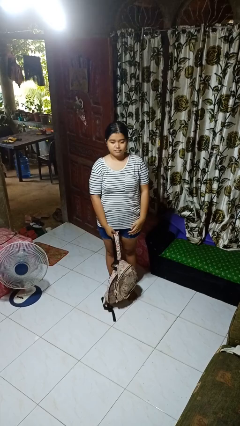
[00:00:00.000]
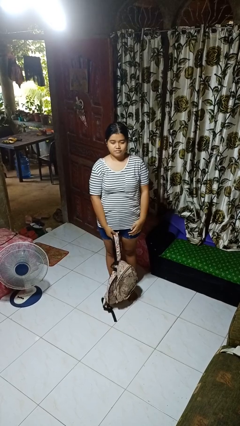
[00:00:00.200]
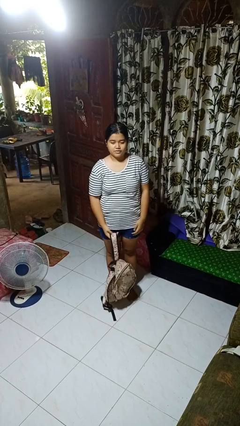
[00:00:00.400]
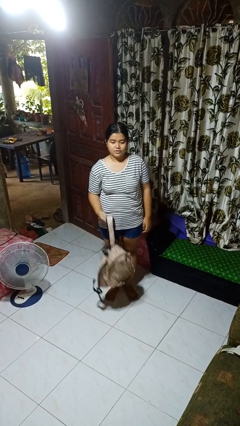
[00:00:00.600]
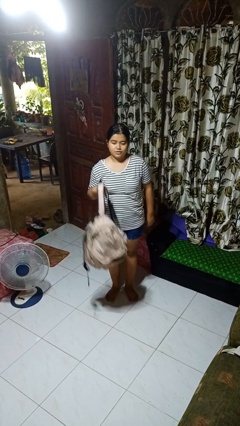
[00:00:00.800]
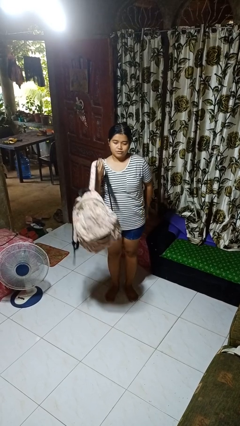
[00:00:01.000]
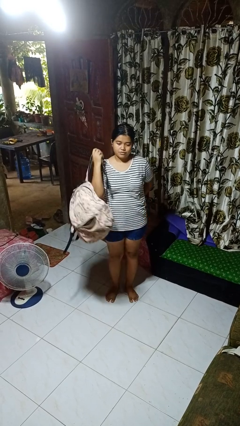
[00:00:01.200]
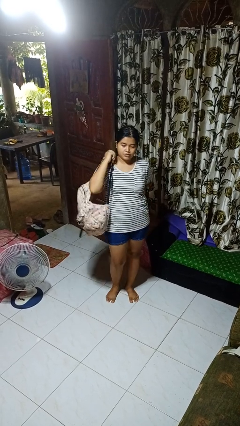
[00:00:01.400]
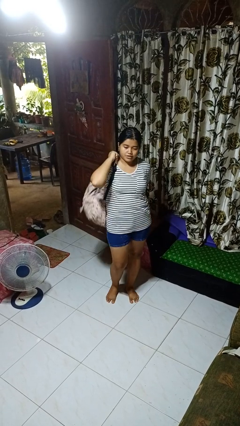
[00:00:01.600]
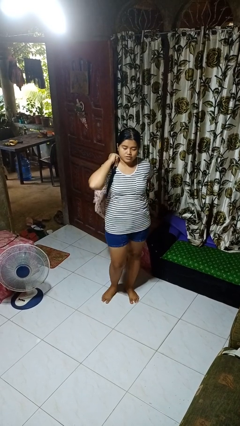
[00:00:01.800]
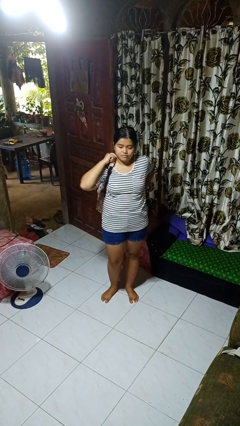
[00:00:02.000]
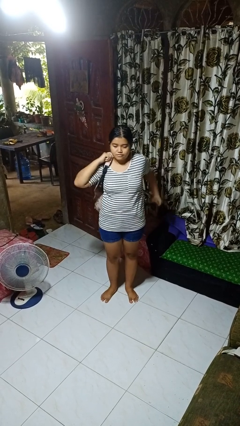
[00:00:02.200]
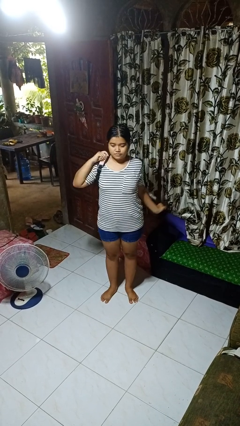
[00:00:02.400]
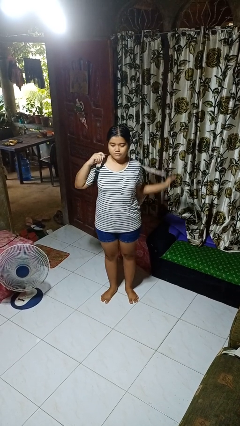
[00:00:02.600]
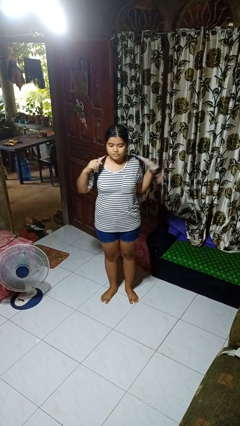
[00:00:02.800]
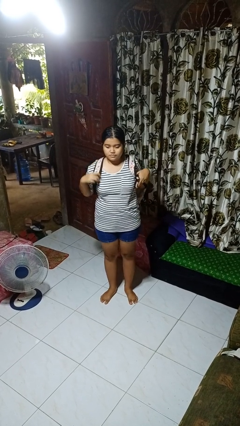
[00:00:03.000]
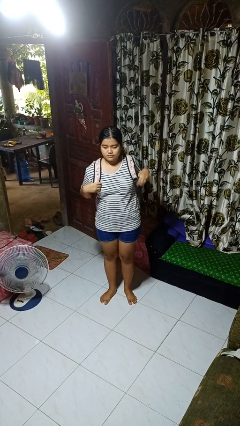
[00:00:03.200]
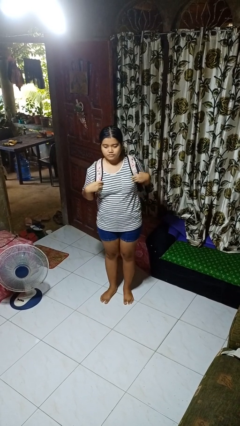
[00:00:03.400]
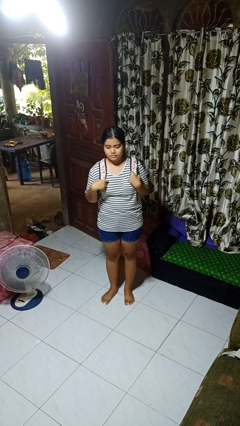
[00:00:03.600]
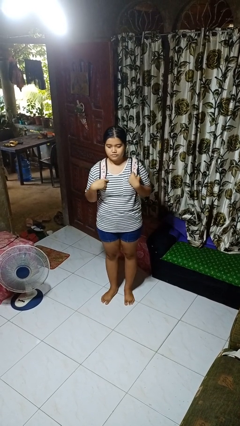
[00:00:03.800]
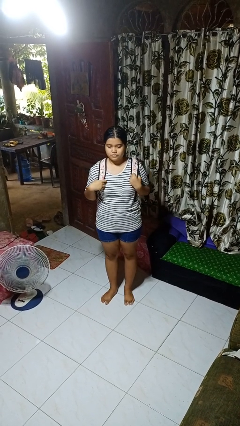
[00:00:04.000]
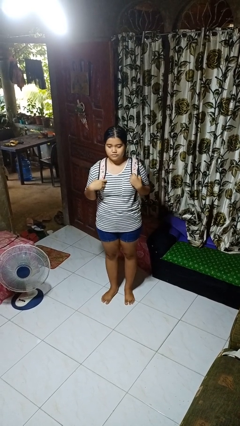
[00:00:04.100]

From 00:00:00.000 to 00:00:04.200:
person puts on backpack

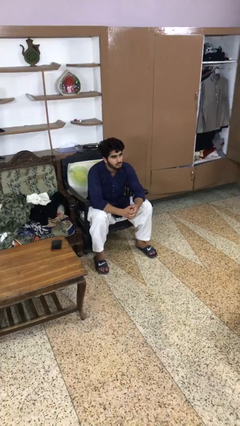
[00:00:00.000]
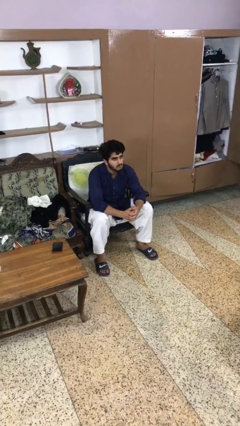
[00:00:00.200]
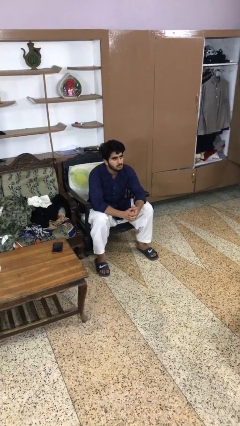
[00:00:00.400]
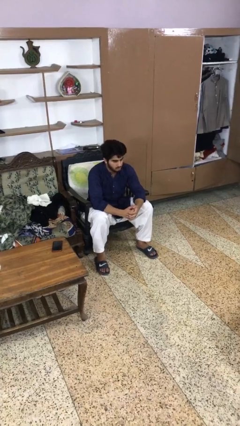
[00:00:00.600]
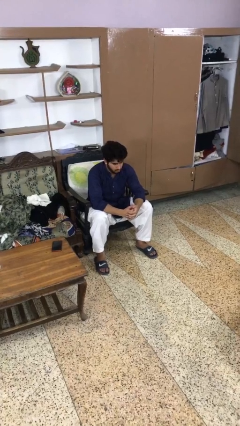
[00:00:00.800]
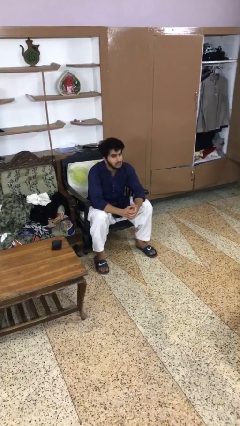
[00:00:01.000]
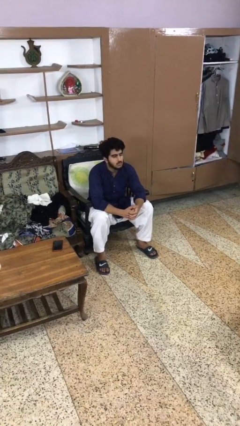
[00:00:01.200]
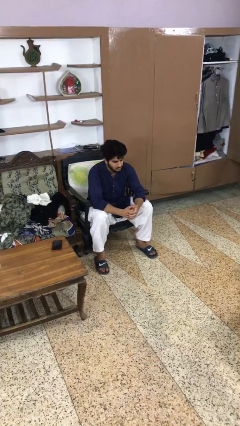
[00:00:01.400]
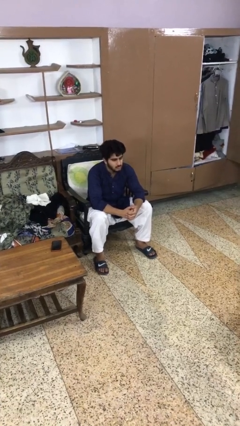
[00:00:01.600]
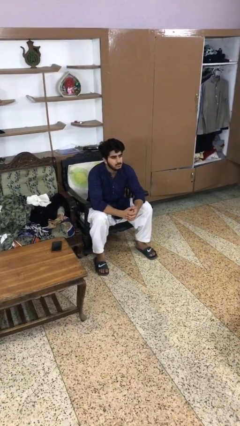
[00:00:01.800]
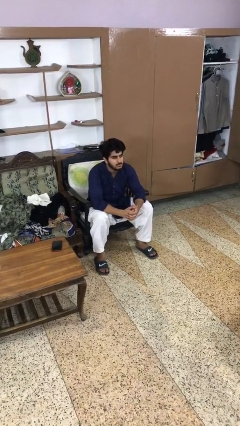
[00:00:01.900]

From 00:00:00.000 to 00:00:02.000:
person nods head

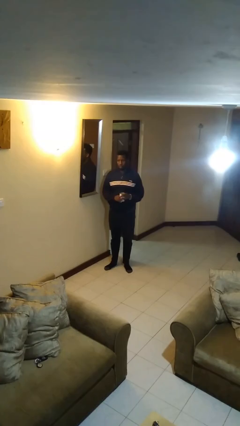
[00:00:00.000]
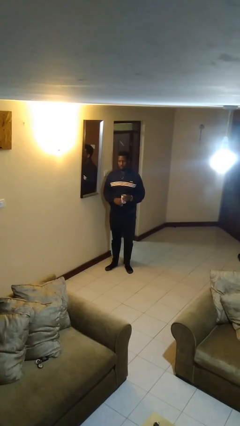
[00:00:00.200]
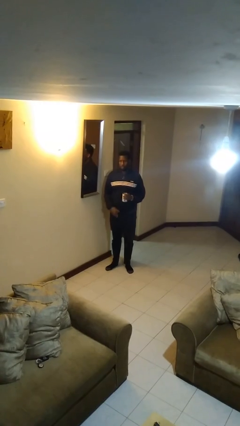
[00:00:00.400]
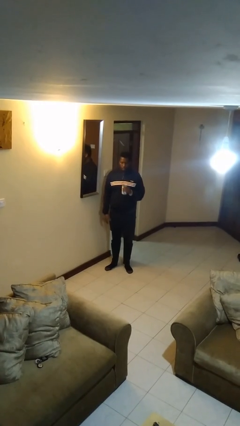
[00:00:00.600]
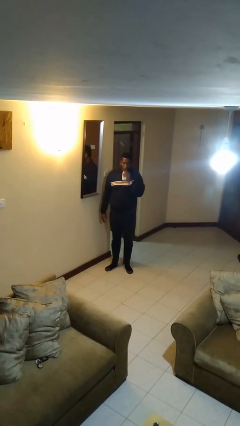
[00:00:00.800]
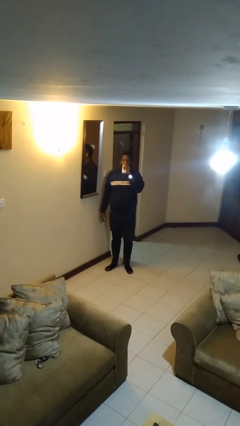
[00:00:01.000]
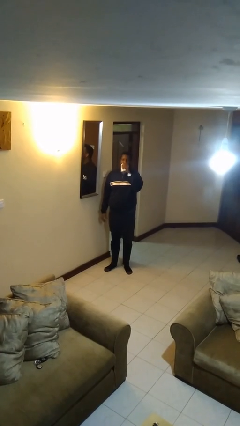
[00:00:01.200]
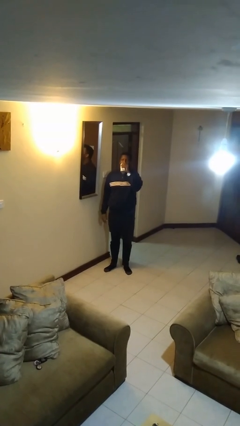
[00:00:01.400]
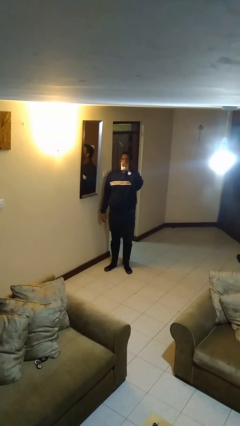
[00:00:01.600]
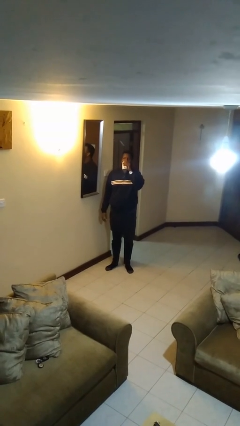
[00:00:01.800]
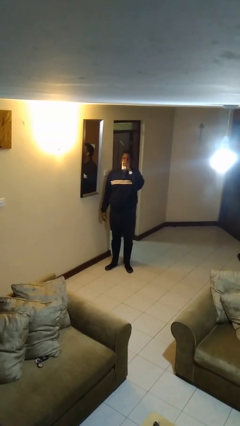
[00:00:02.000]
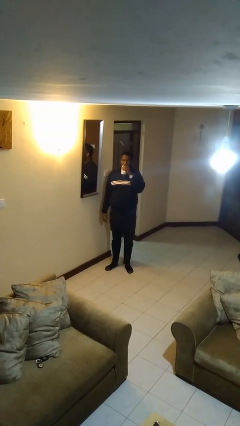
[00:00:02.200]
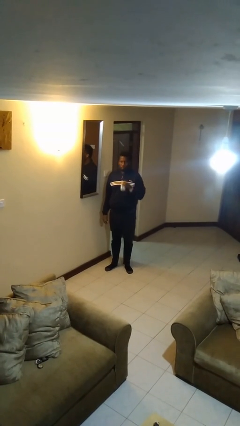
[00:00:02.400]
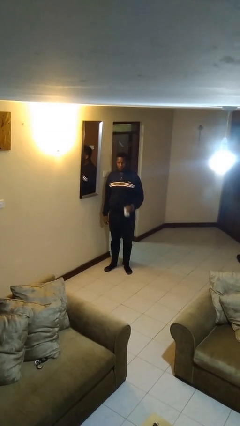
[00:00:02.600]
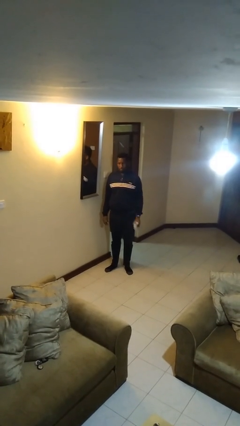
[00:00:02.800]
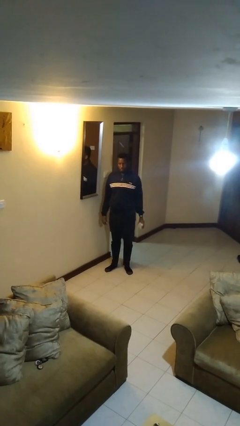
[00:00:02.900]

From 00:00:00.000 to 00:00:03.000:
person drinks from beverage can

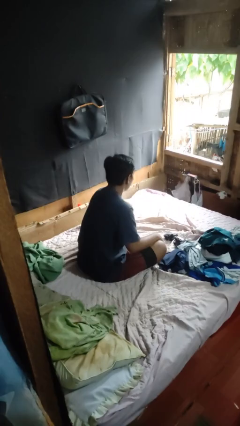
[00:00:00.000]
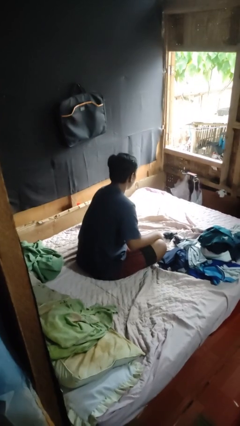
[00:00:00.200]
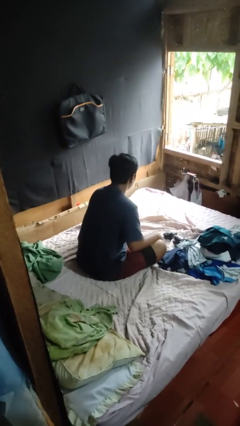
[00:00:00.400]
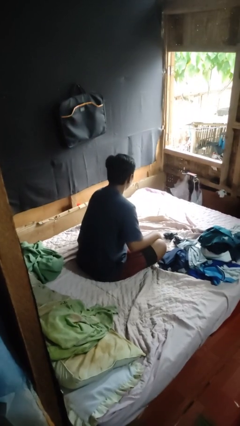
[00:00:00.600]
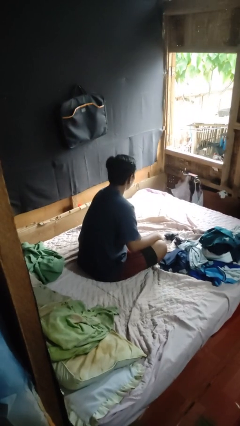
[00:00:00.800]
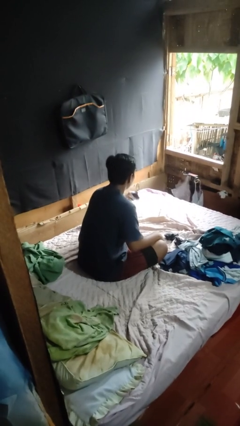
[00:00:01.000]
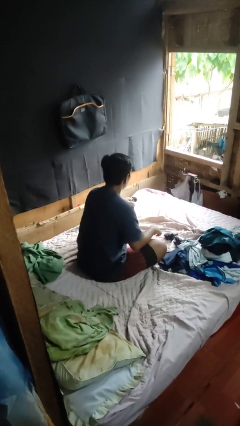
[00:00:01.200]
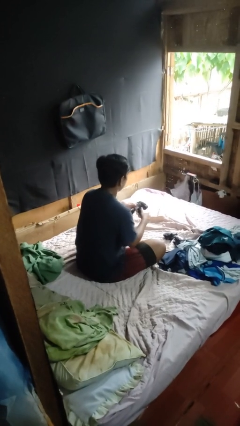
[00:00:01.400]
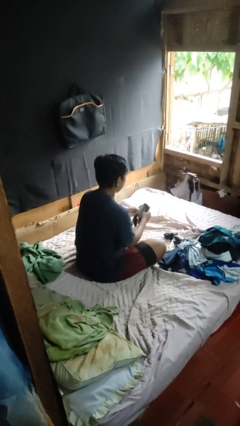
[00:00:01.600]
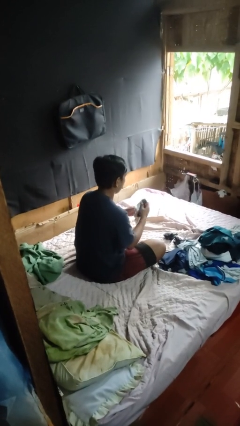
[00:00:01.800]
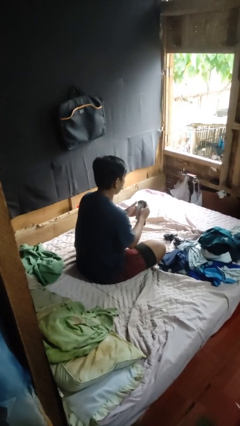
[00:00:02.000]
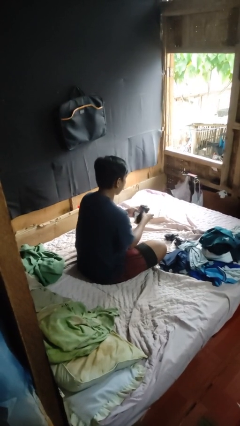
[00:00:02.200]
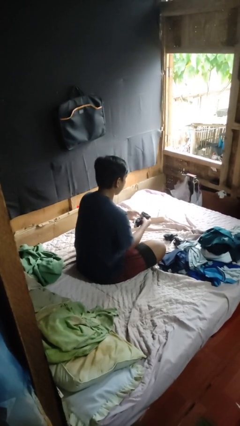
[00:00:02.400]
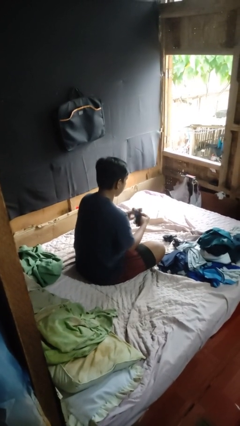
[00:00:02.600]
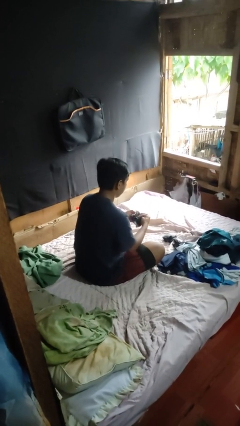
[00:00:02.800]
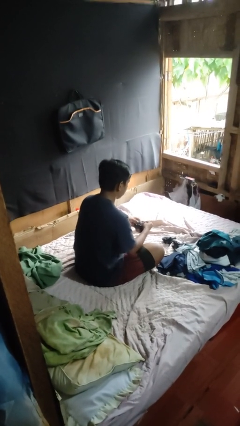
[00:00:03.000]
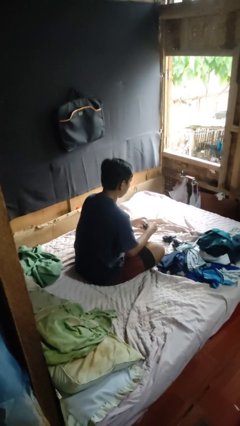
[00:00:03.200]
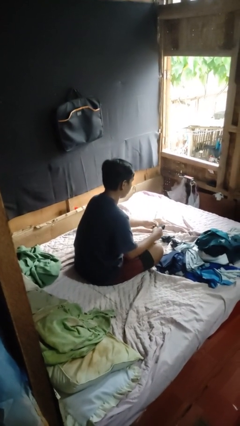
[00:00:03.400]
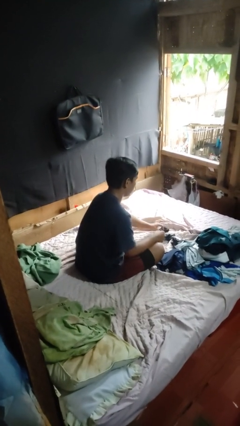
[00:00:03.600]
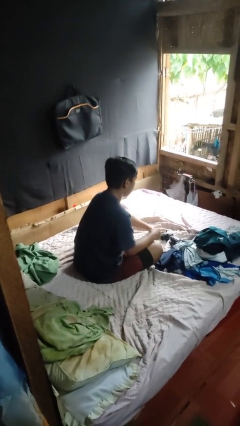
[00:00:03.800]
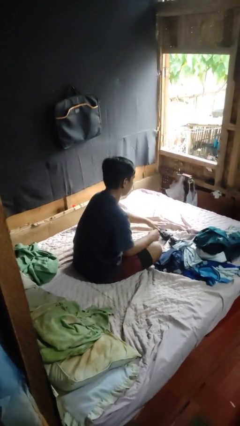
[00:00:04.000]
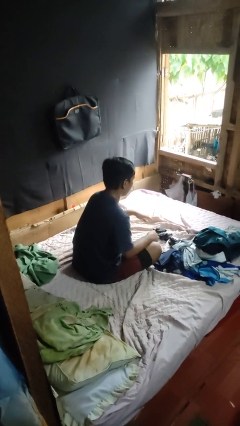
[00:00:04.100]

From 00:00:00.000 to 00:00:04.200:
person folds socks

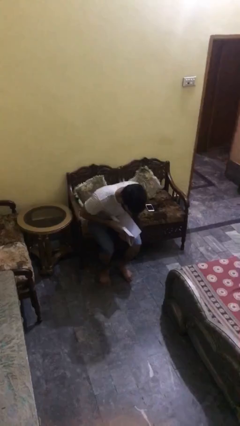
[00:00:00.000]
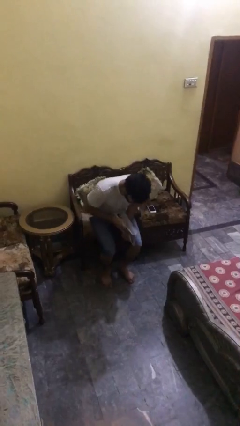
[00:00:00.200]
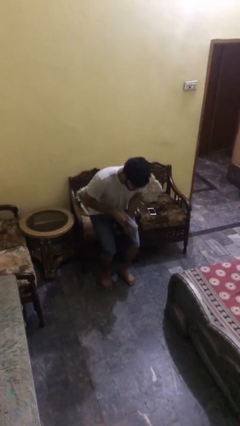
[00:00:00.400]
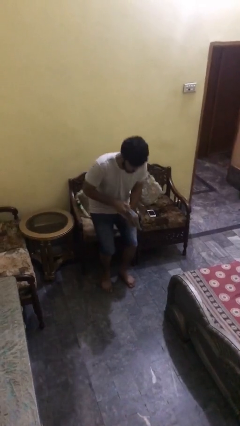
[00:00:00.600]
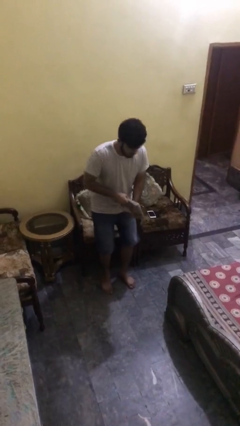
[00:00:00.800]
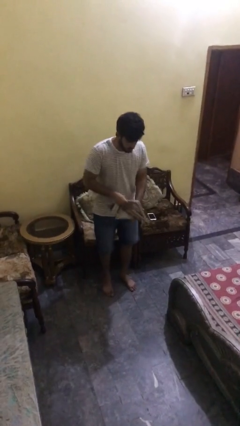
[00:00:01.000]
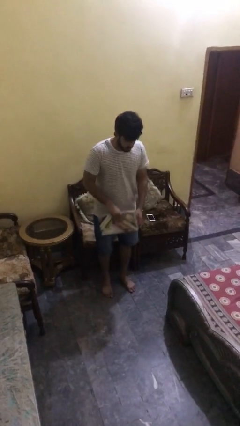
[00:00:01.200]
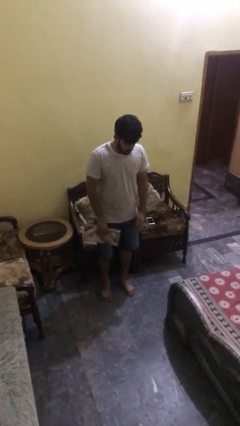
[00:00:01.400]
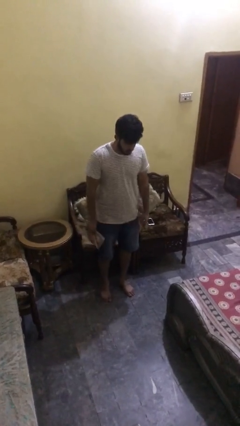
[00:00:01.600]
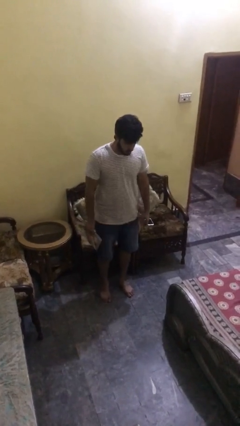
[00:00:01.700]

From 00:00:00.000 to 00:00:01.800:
person stands up

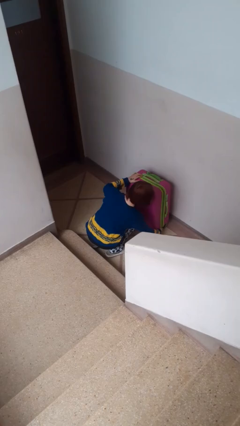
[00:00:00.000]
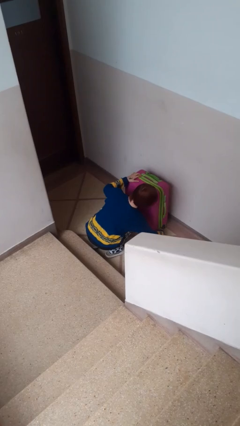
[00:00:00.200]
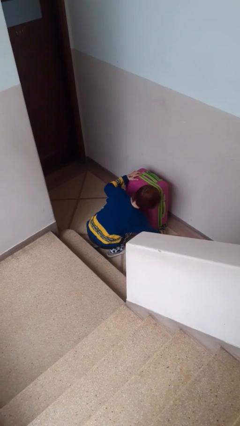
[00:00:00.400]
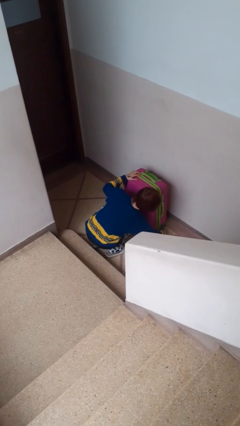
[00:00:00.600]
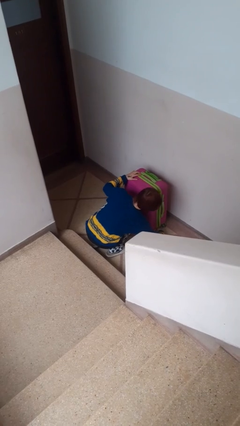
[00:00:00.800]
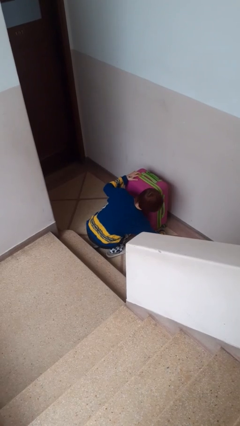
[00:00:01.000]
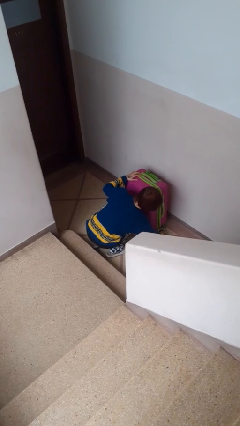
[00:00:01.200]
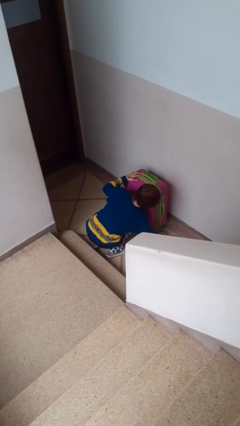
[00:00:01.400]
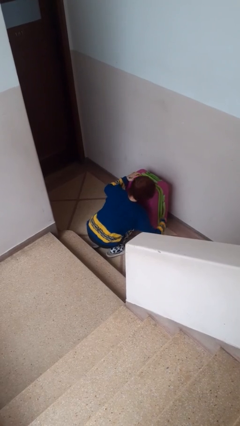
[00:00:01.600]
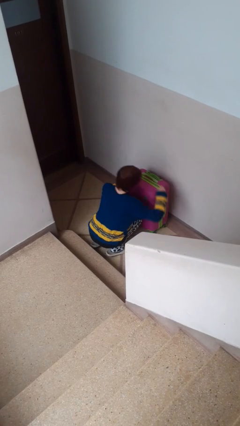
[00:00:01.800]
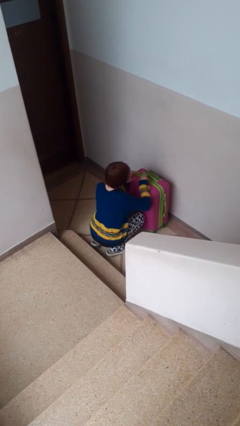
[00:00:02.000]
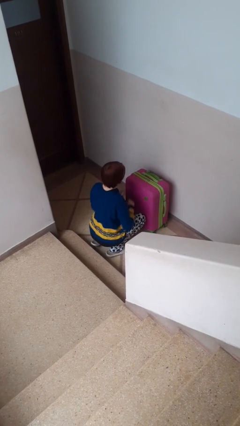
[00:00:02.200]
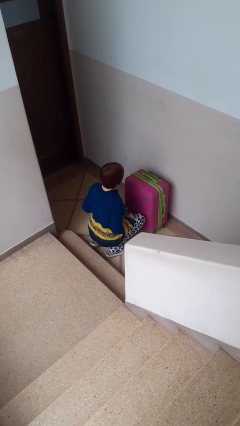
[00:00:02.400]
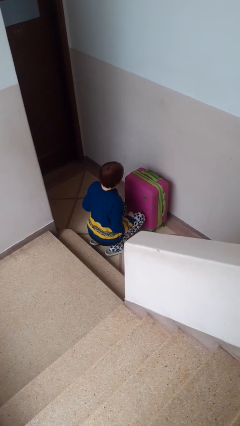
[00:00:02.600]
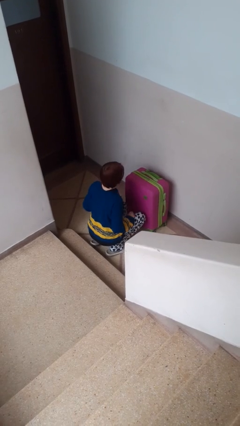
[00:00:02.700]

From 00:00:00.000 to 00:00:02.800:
person closes suitcase
